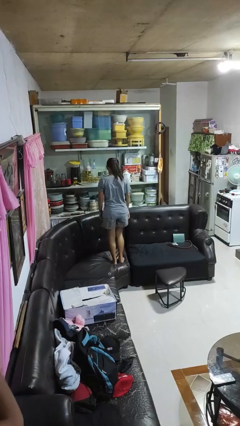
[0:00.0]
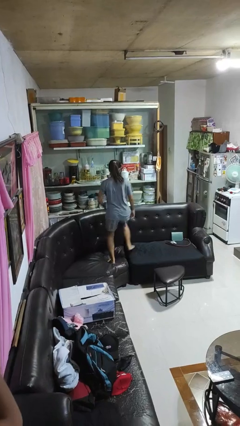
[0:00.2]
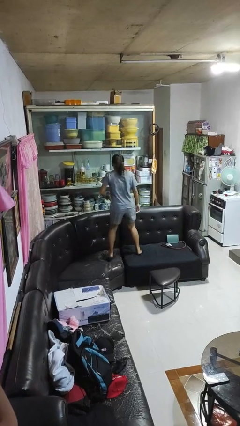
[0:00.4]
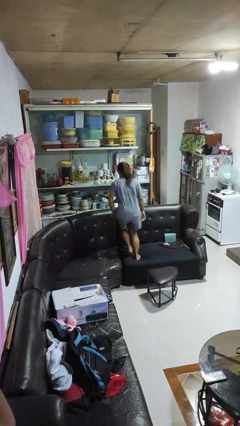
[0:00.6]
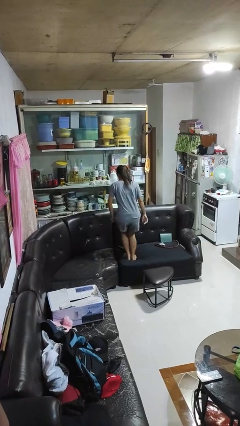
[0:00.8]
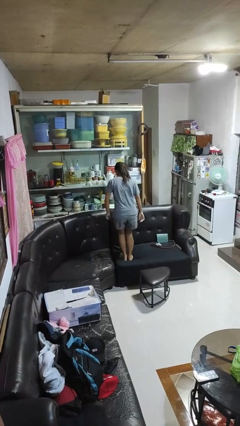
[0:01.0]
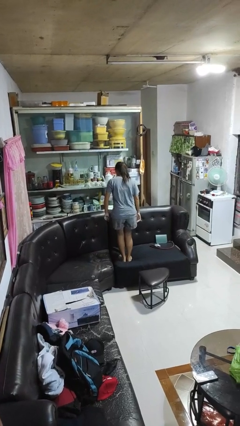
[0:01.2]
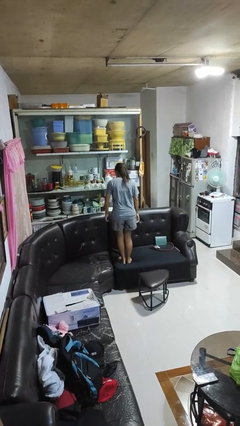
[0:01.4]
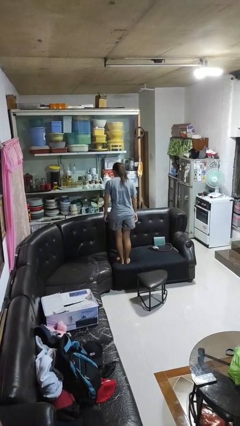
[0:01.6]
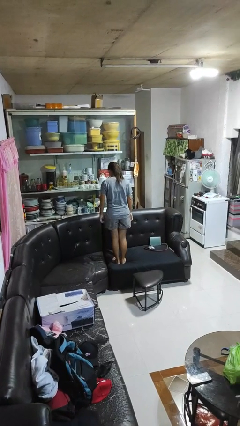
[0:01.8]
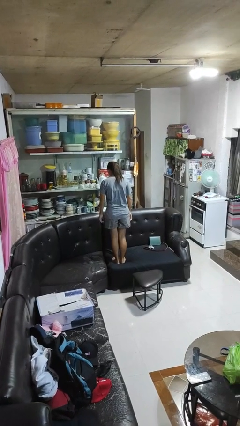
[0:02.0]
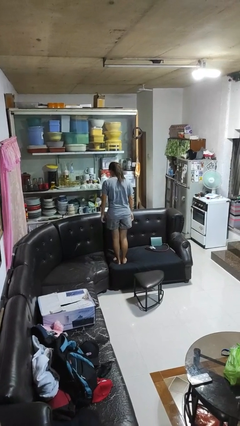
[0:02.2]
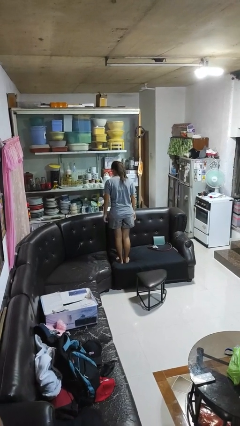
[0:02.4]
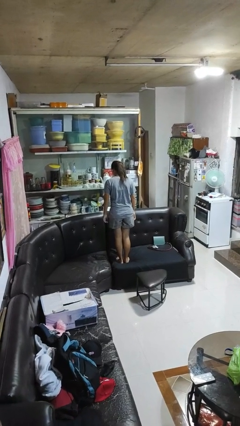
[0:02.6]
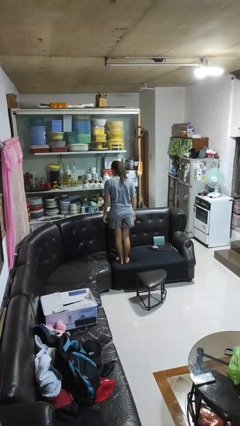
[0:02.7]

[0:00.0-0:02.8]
person jumps on couch

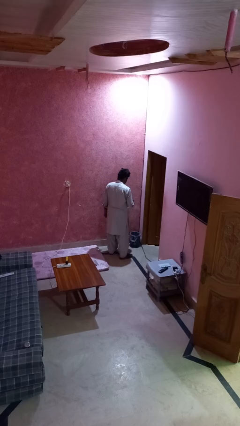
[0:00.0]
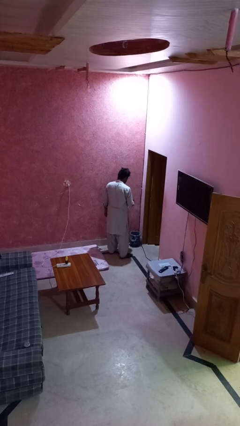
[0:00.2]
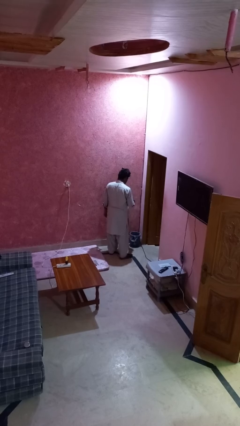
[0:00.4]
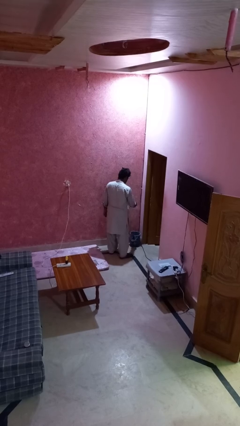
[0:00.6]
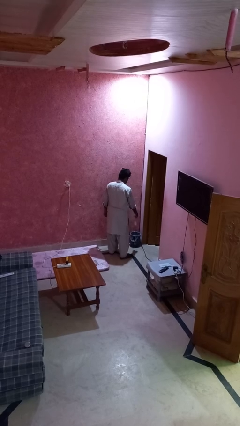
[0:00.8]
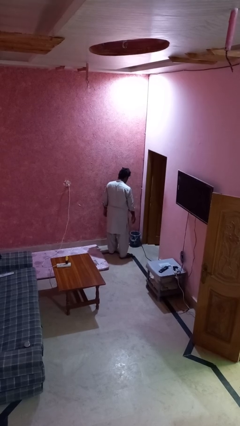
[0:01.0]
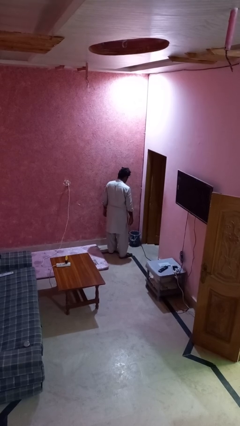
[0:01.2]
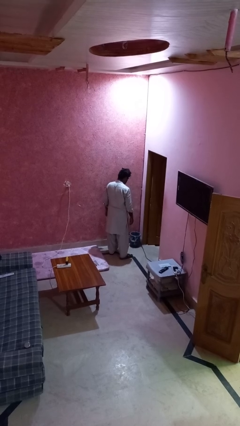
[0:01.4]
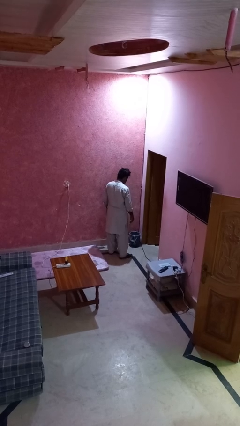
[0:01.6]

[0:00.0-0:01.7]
person discards trash

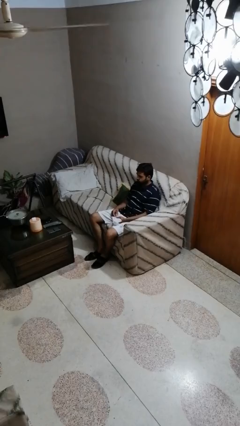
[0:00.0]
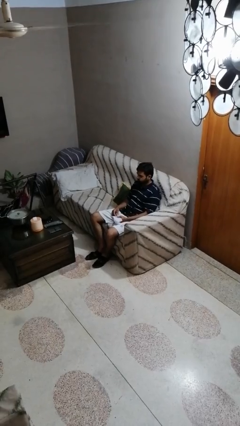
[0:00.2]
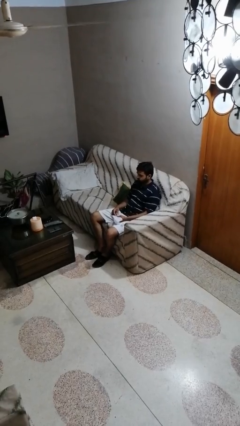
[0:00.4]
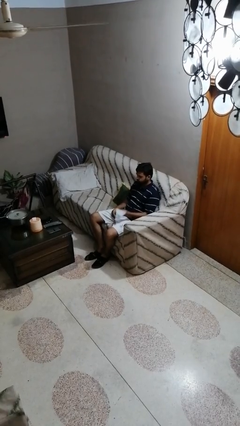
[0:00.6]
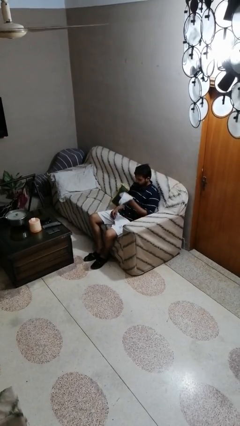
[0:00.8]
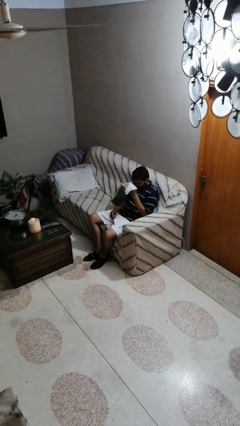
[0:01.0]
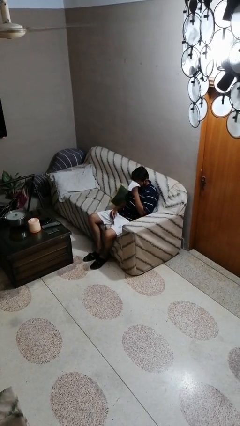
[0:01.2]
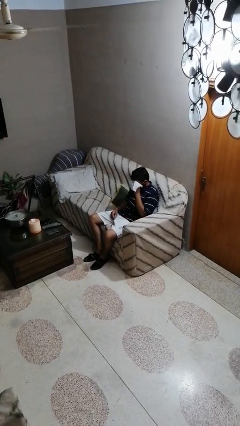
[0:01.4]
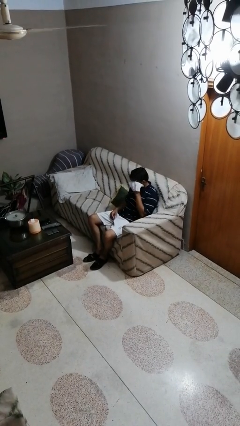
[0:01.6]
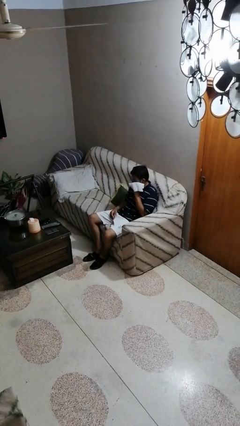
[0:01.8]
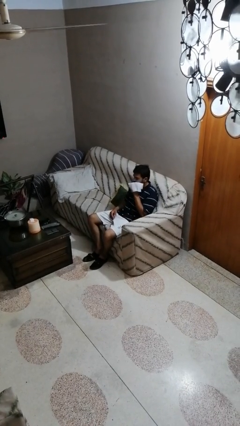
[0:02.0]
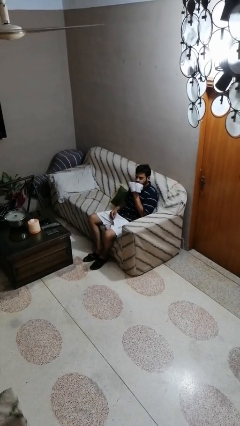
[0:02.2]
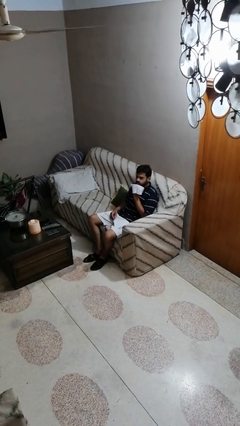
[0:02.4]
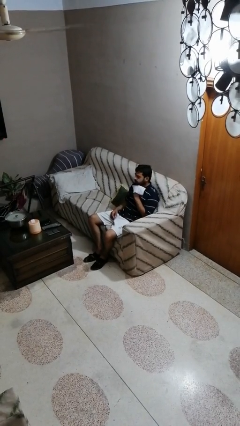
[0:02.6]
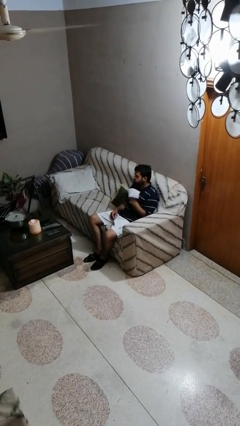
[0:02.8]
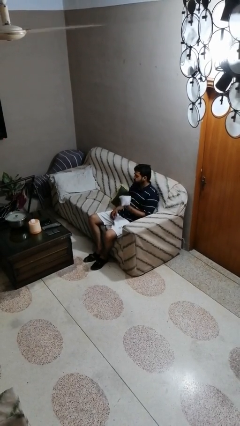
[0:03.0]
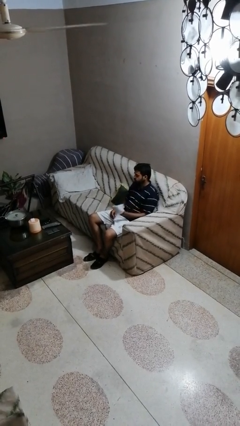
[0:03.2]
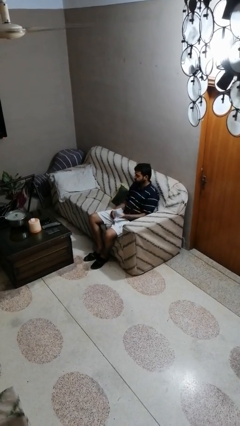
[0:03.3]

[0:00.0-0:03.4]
person wipes mouth with napkin

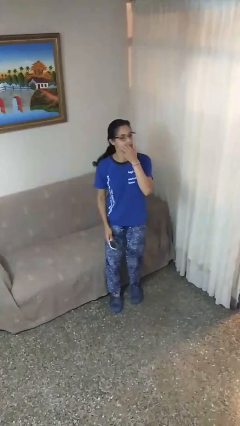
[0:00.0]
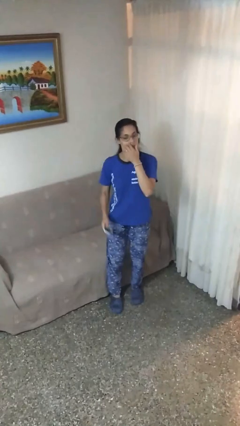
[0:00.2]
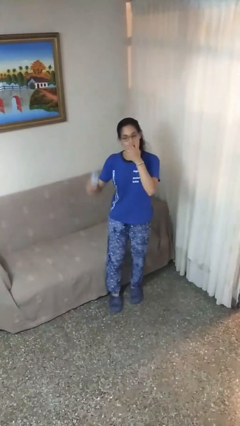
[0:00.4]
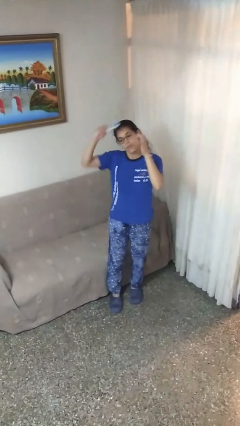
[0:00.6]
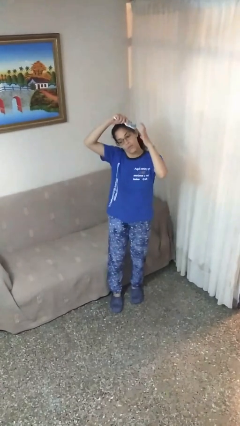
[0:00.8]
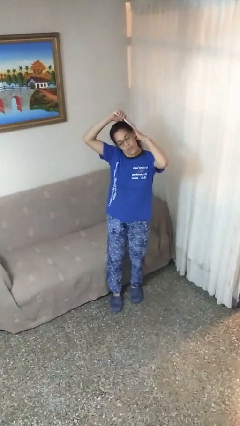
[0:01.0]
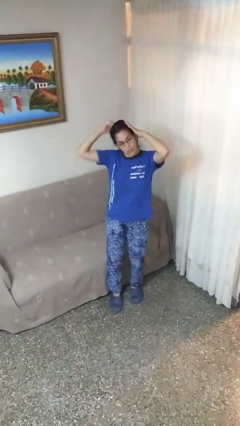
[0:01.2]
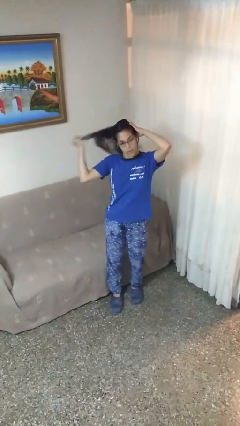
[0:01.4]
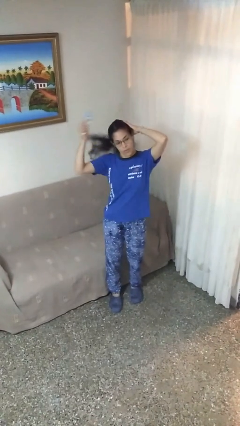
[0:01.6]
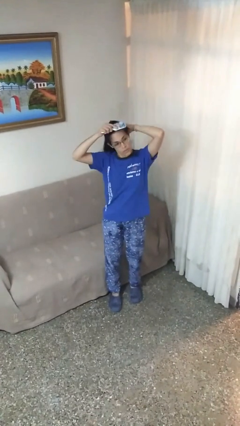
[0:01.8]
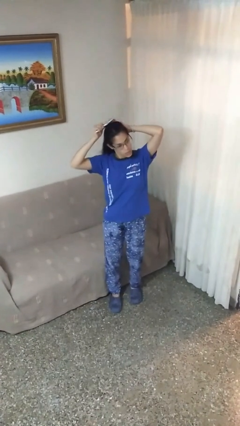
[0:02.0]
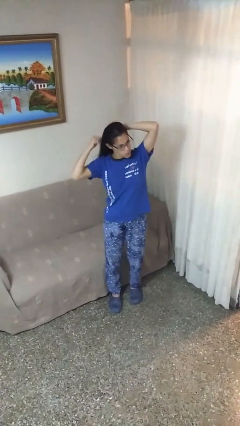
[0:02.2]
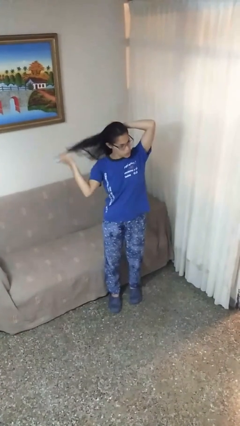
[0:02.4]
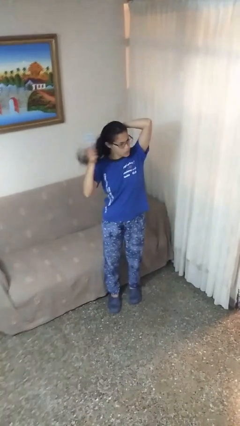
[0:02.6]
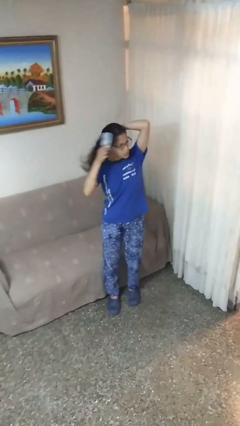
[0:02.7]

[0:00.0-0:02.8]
person brushes hair

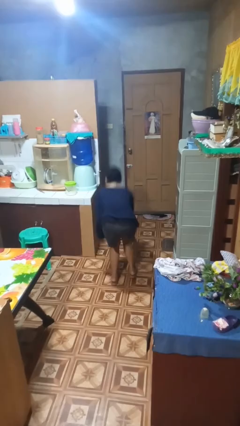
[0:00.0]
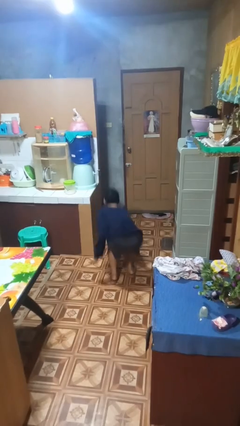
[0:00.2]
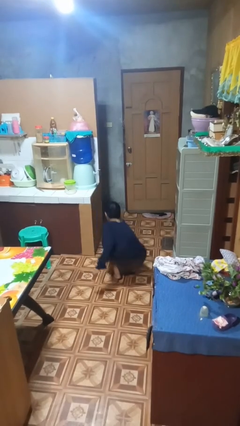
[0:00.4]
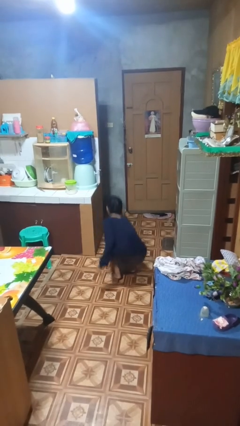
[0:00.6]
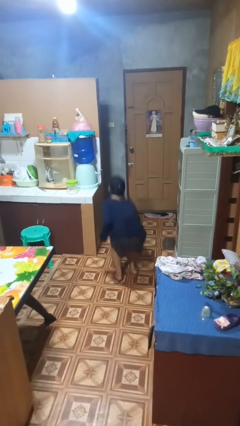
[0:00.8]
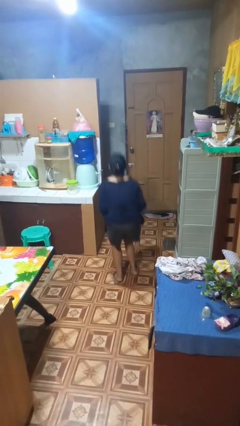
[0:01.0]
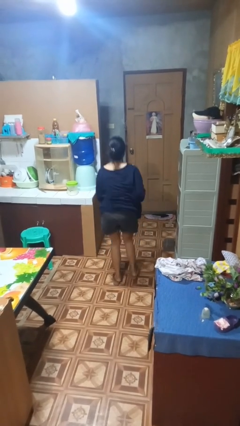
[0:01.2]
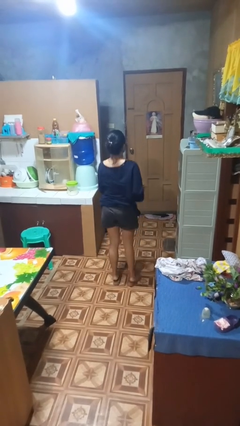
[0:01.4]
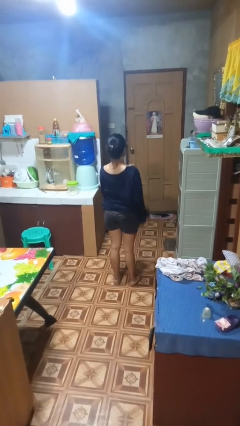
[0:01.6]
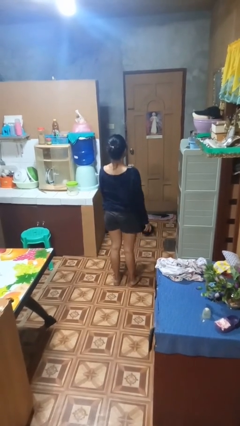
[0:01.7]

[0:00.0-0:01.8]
person picks up object from floor

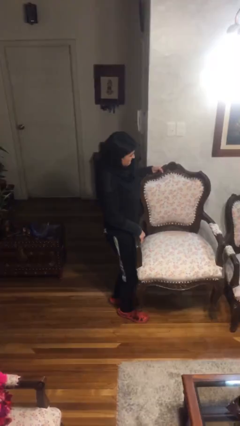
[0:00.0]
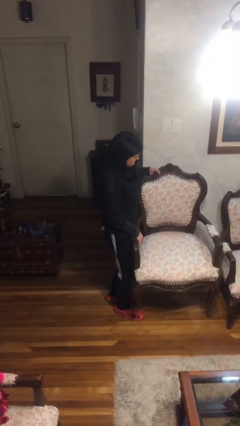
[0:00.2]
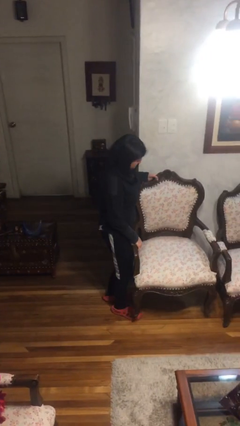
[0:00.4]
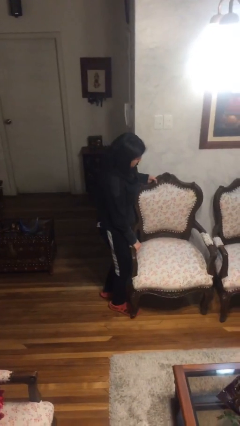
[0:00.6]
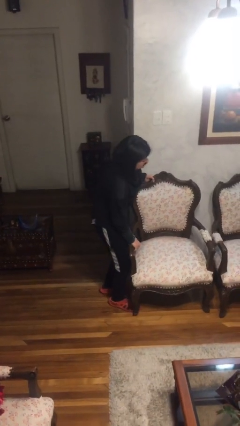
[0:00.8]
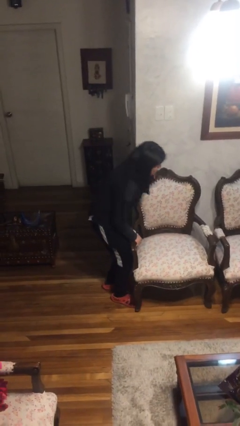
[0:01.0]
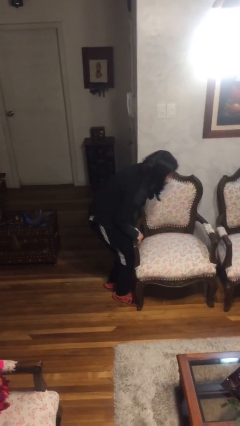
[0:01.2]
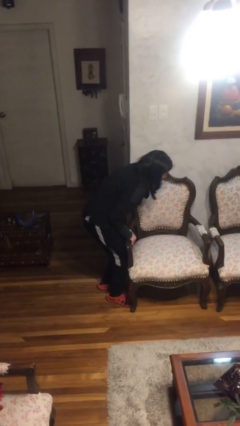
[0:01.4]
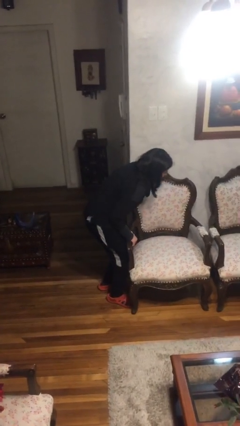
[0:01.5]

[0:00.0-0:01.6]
person puts down object on floor

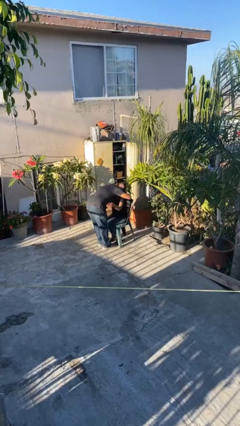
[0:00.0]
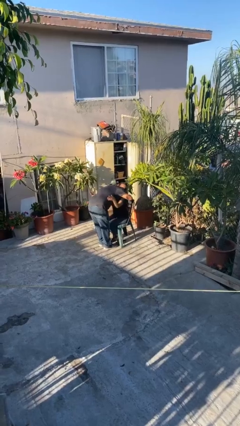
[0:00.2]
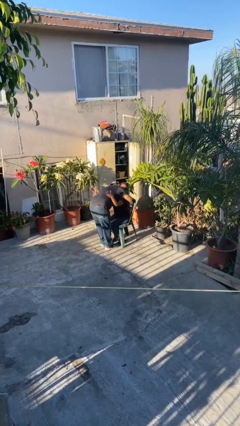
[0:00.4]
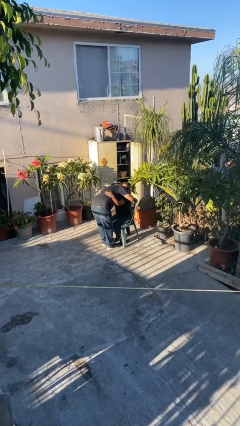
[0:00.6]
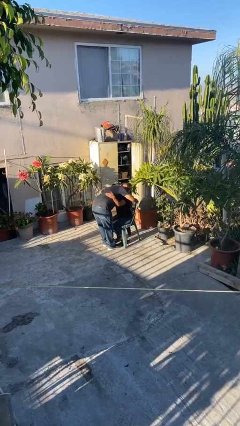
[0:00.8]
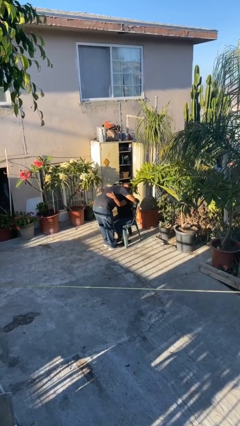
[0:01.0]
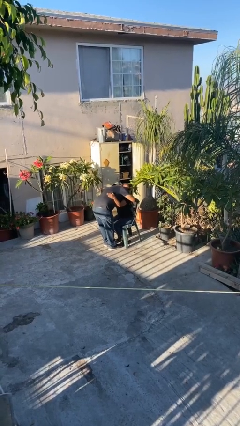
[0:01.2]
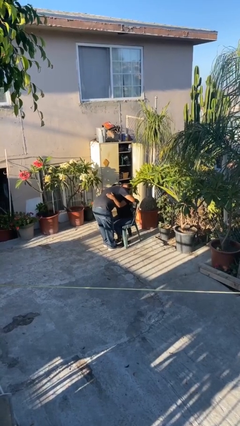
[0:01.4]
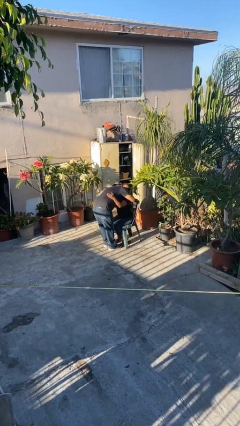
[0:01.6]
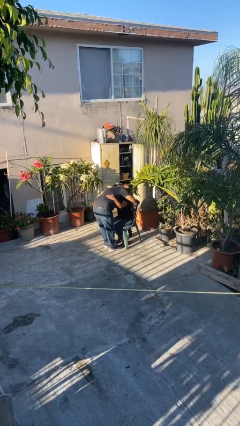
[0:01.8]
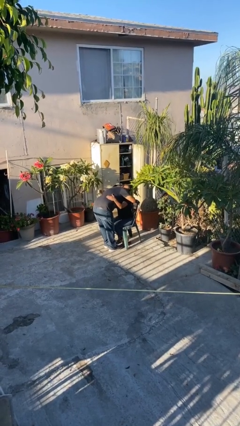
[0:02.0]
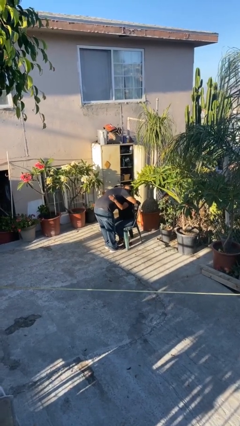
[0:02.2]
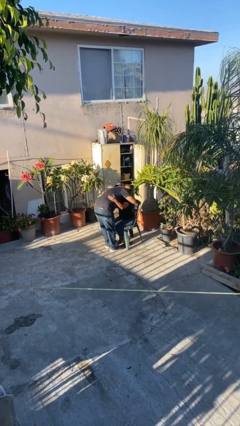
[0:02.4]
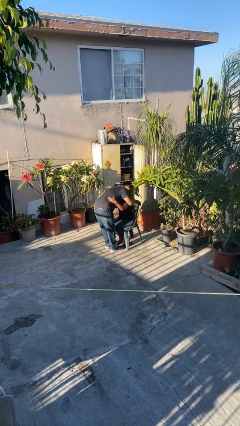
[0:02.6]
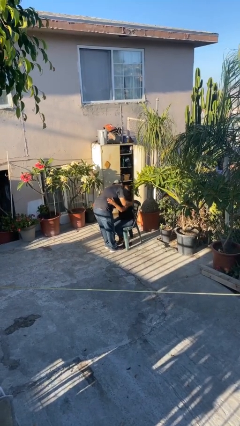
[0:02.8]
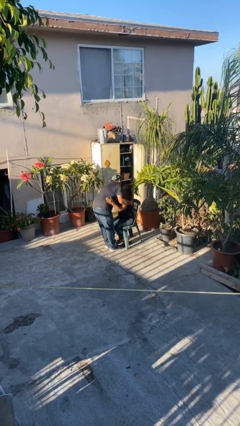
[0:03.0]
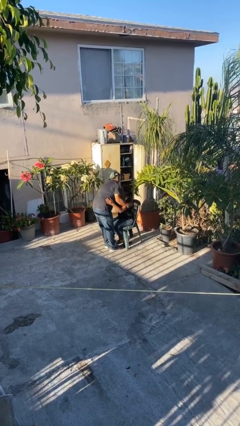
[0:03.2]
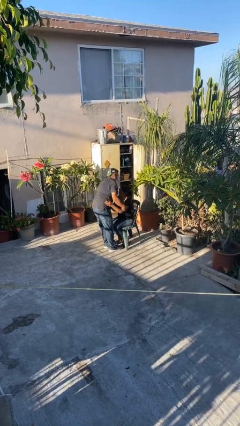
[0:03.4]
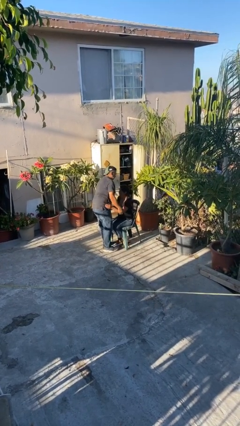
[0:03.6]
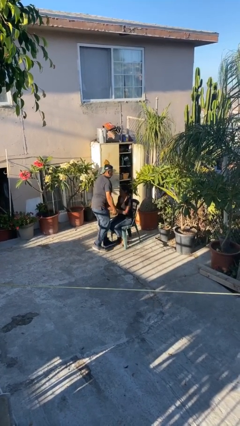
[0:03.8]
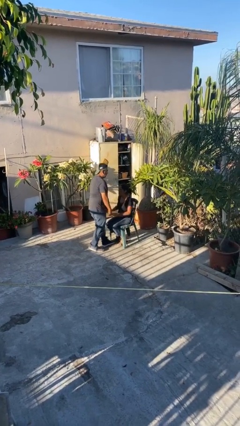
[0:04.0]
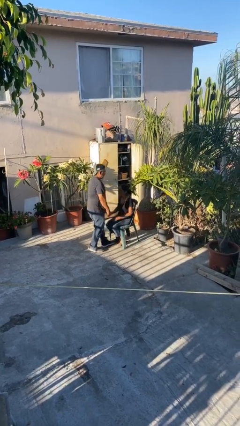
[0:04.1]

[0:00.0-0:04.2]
person embraces person
